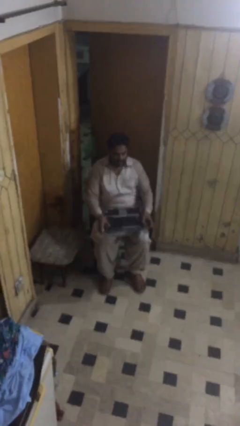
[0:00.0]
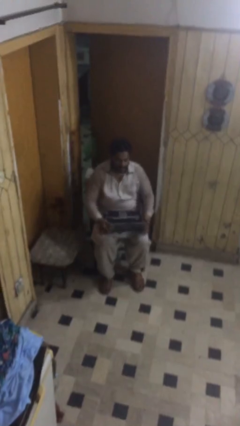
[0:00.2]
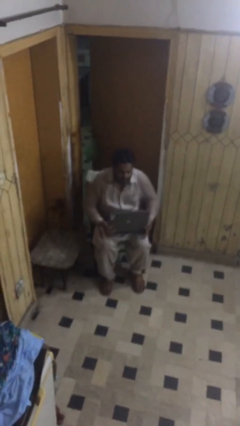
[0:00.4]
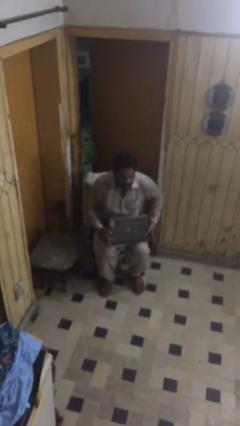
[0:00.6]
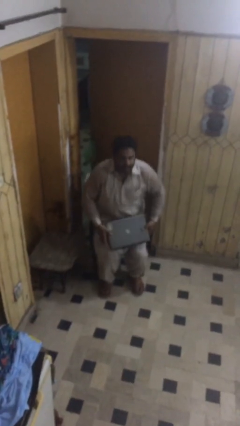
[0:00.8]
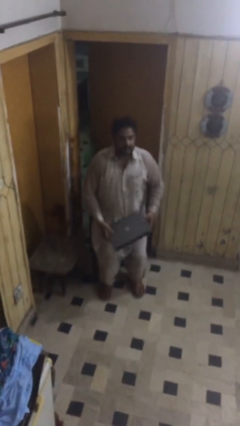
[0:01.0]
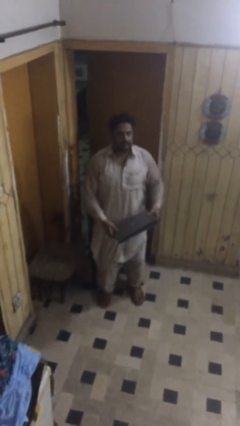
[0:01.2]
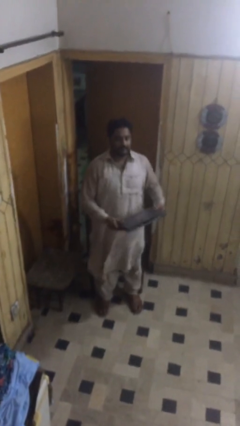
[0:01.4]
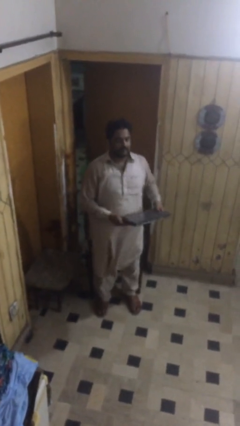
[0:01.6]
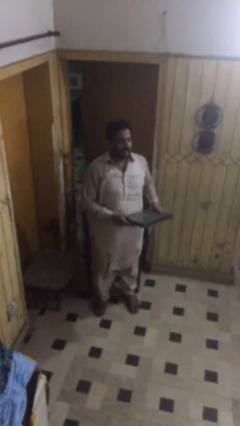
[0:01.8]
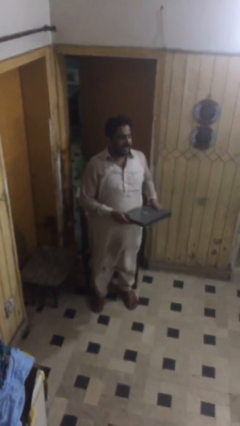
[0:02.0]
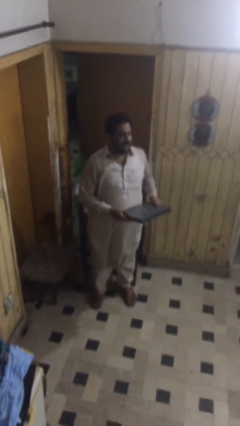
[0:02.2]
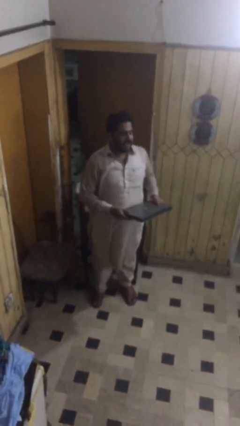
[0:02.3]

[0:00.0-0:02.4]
person stands up

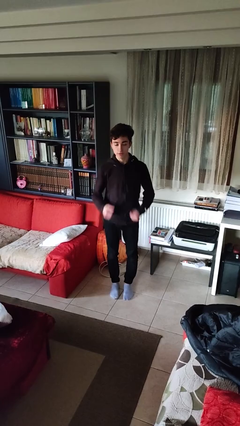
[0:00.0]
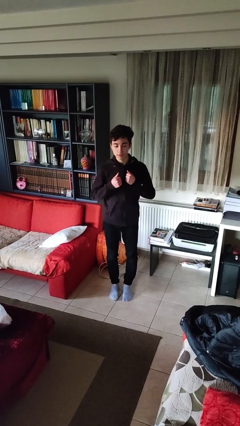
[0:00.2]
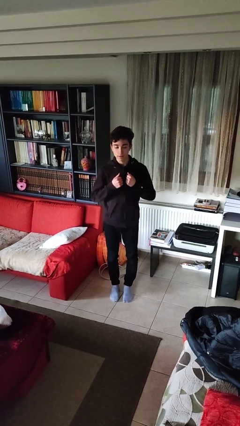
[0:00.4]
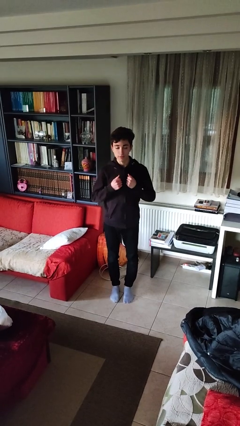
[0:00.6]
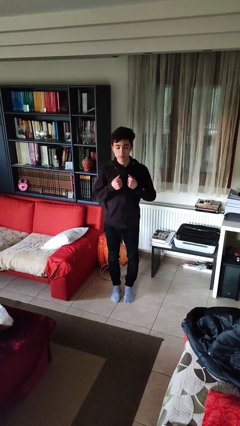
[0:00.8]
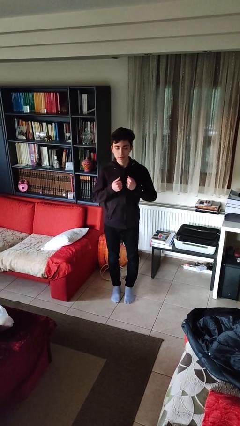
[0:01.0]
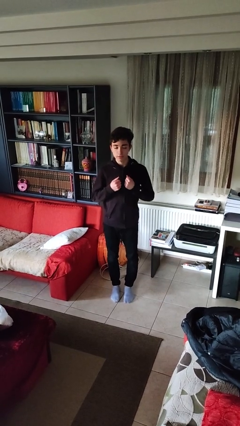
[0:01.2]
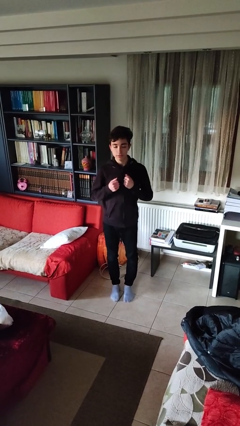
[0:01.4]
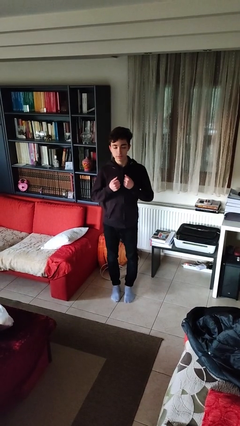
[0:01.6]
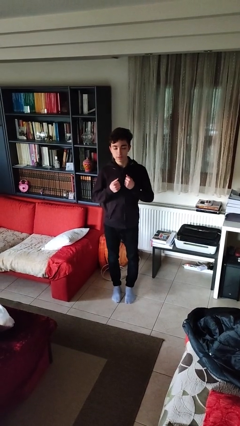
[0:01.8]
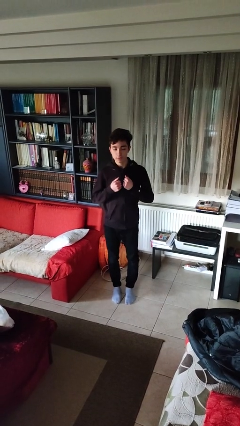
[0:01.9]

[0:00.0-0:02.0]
person drums on chest

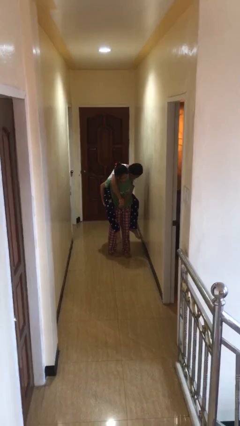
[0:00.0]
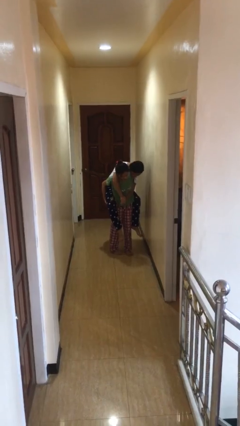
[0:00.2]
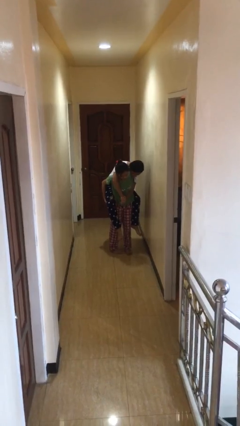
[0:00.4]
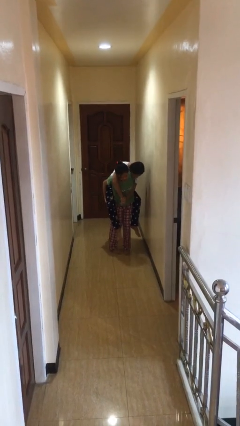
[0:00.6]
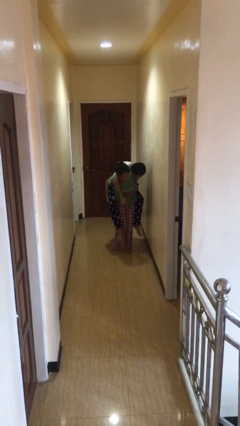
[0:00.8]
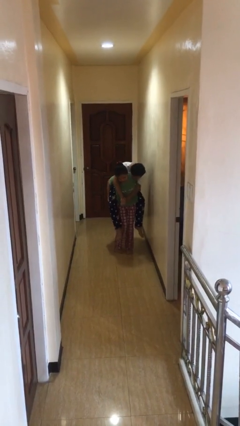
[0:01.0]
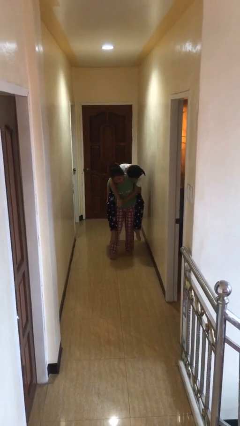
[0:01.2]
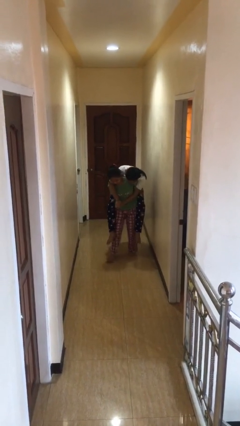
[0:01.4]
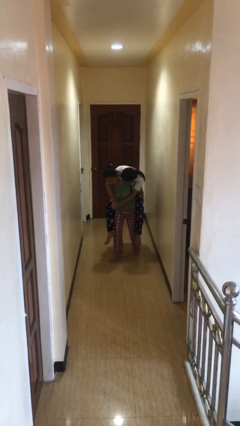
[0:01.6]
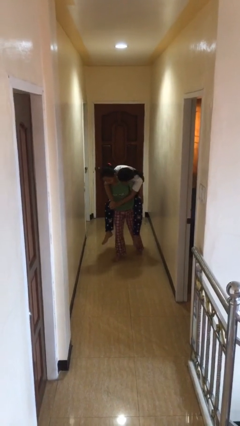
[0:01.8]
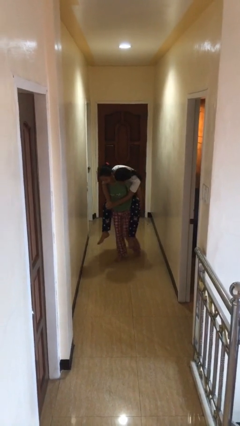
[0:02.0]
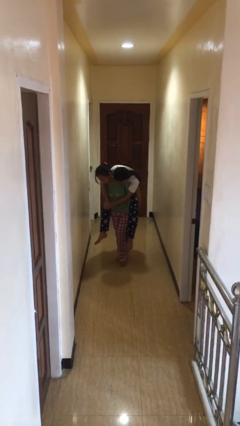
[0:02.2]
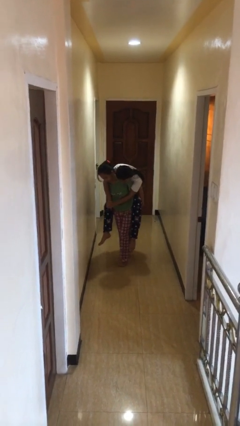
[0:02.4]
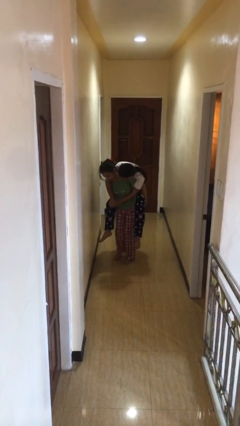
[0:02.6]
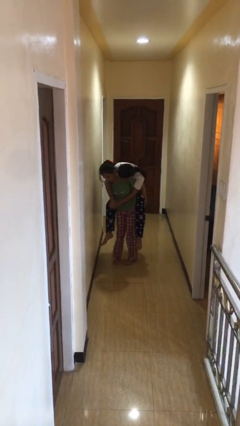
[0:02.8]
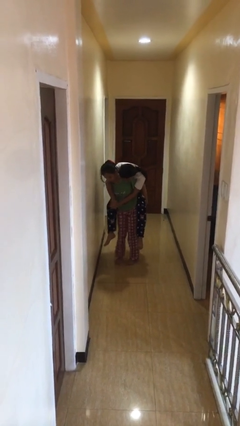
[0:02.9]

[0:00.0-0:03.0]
person carries person on back

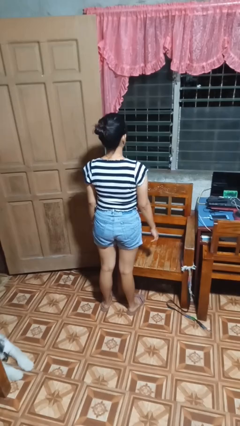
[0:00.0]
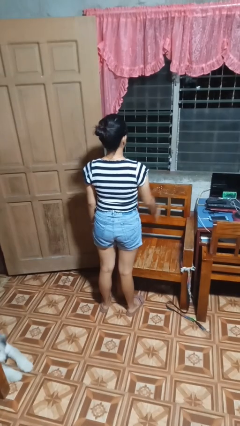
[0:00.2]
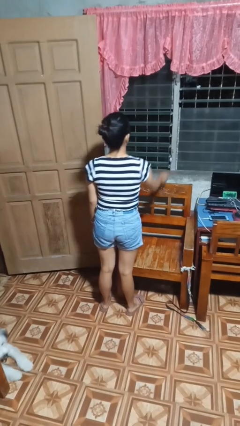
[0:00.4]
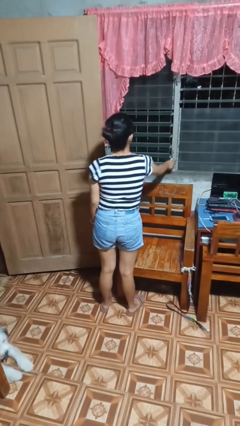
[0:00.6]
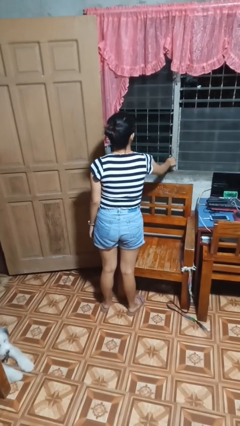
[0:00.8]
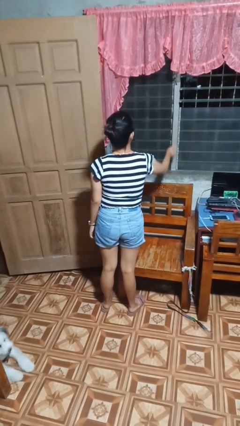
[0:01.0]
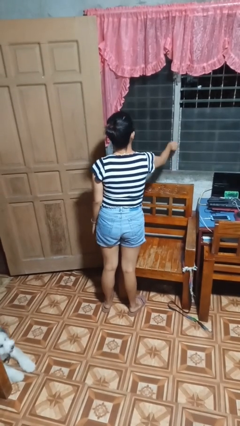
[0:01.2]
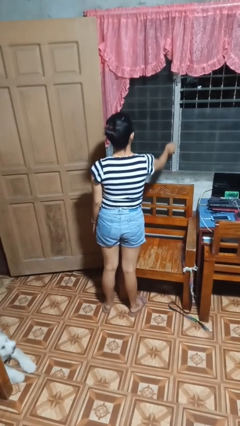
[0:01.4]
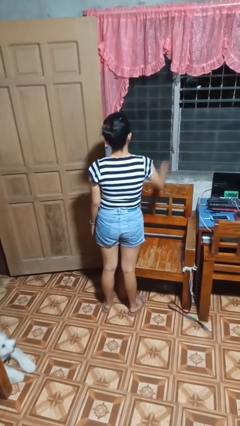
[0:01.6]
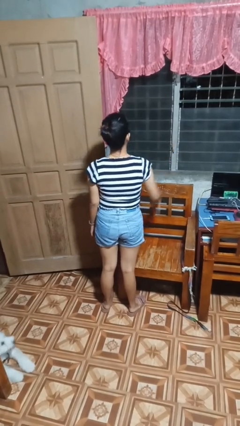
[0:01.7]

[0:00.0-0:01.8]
person closes home window

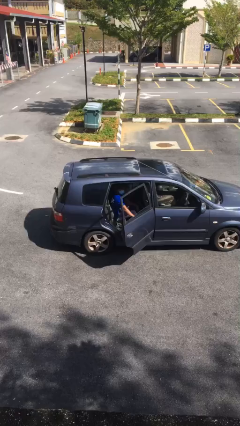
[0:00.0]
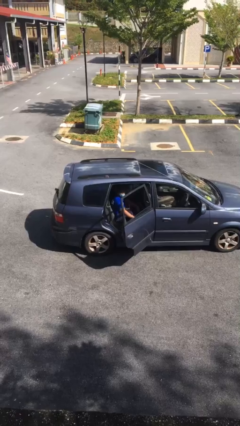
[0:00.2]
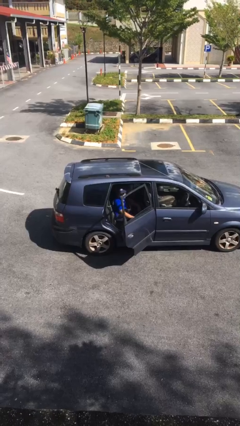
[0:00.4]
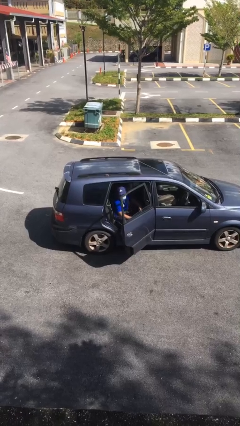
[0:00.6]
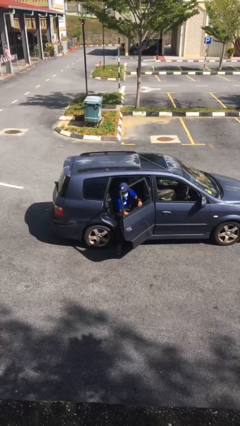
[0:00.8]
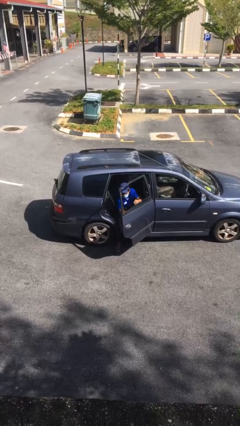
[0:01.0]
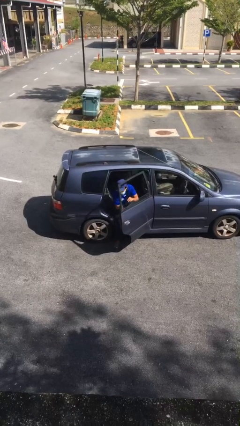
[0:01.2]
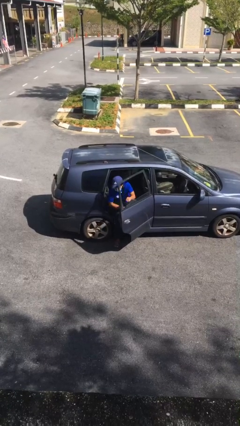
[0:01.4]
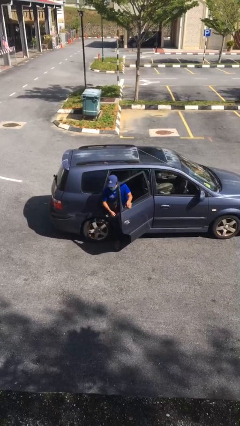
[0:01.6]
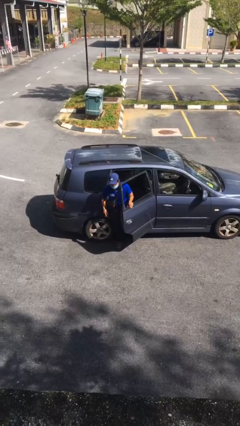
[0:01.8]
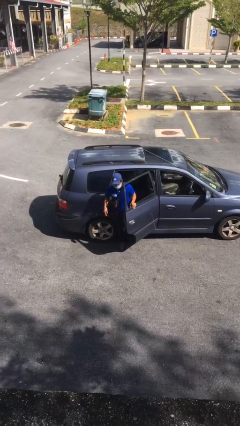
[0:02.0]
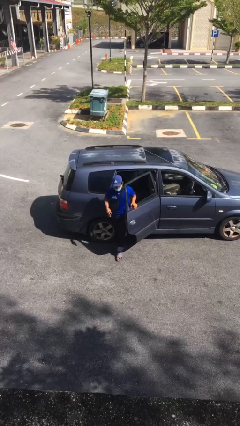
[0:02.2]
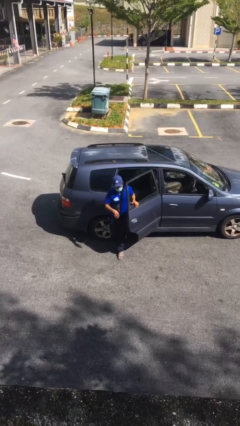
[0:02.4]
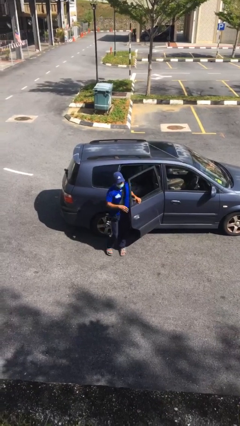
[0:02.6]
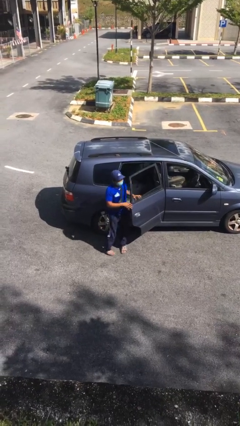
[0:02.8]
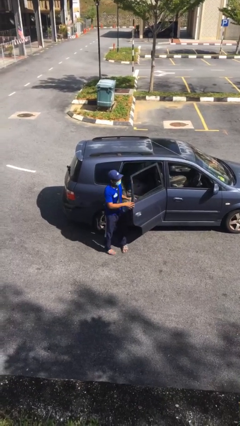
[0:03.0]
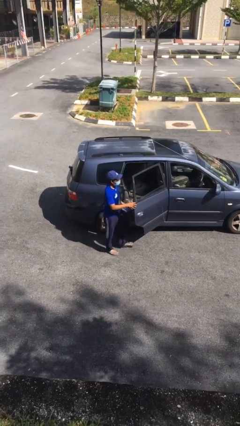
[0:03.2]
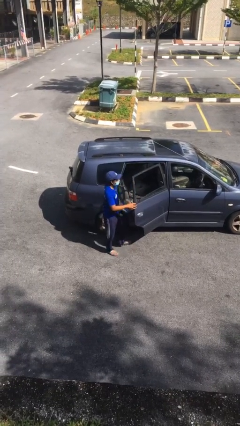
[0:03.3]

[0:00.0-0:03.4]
person exits car

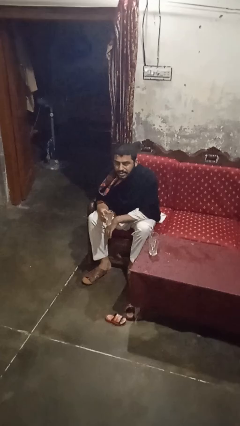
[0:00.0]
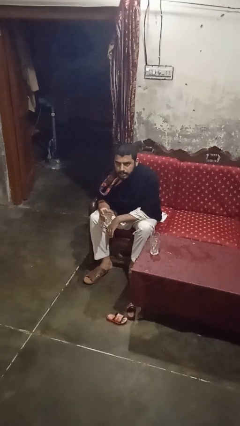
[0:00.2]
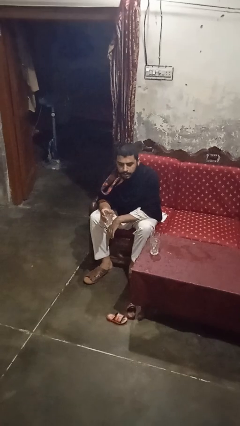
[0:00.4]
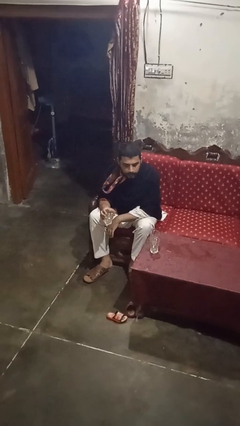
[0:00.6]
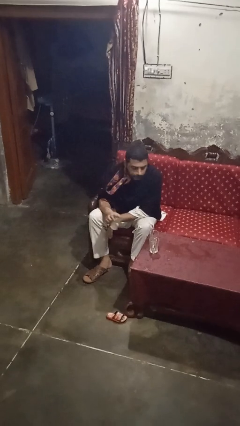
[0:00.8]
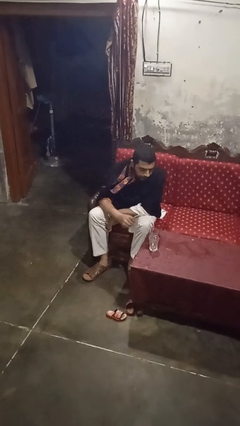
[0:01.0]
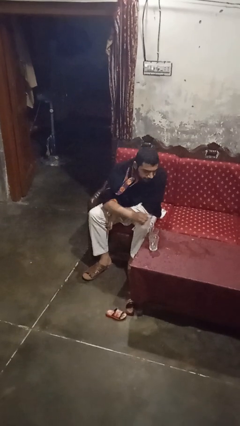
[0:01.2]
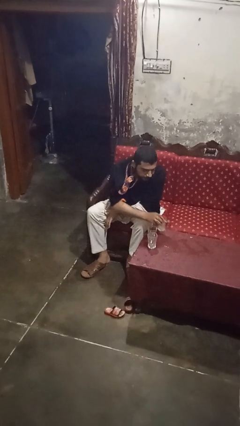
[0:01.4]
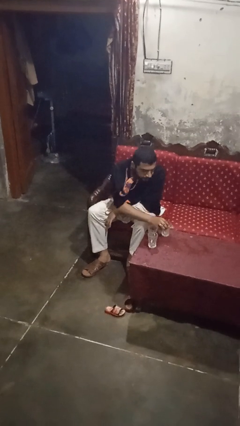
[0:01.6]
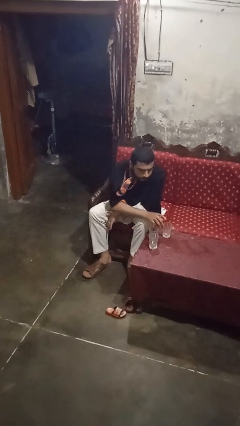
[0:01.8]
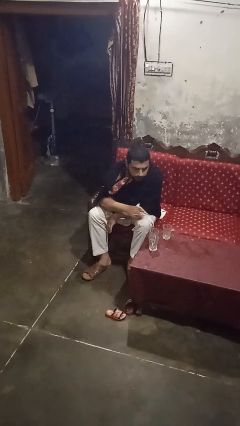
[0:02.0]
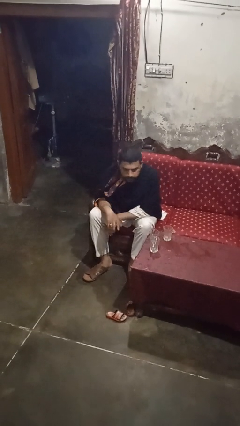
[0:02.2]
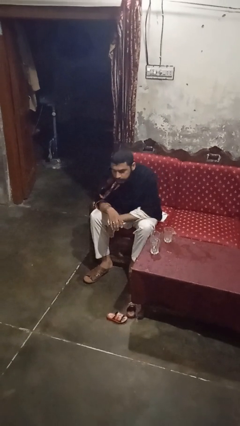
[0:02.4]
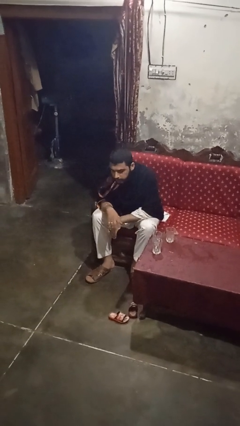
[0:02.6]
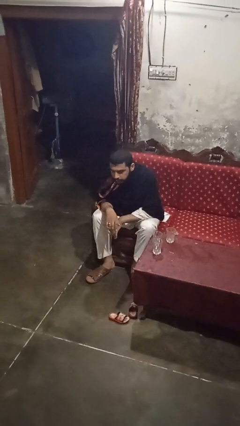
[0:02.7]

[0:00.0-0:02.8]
person puts down object on table

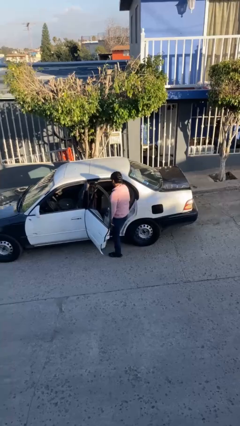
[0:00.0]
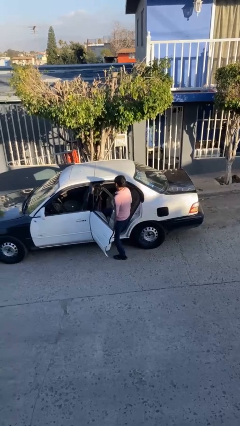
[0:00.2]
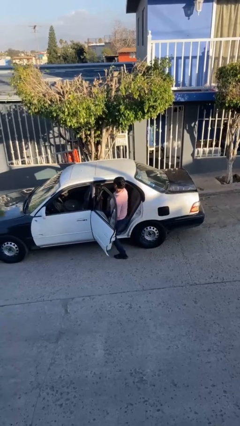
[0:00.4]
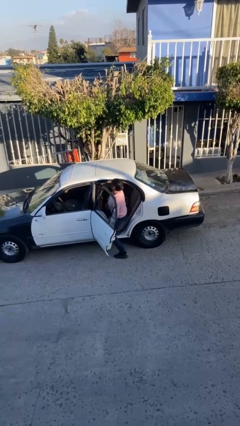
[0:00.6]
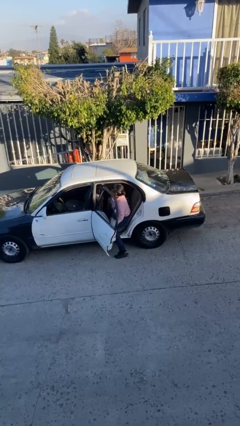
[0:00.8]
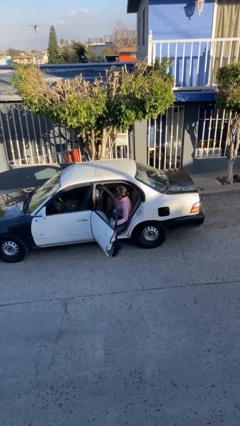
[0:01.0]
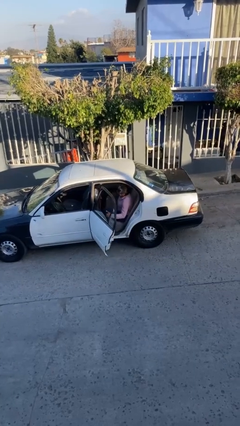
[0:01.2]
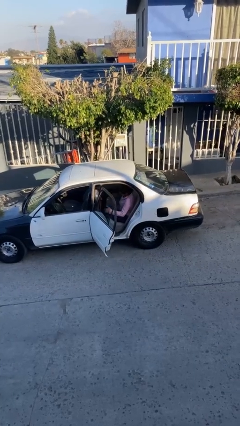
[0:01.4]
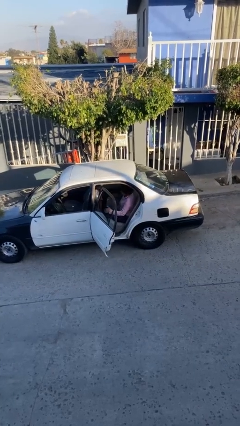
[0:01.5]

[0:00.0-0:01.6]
person enters car

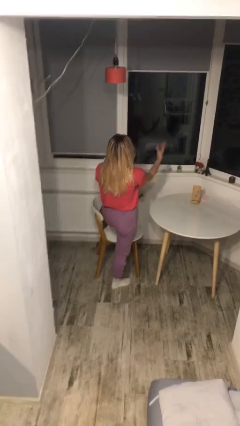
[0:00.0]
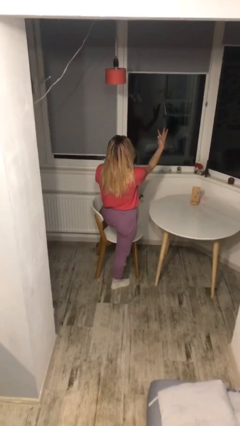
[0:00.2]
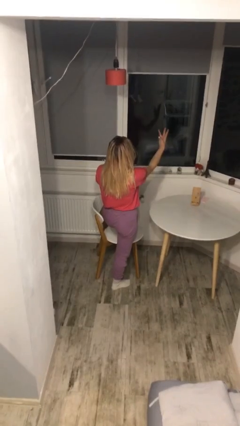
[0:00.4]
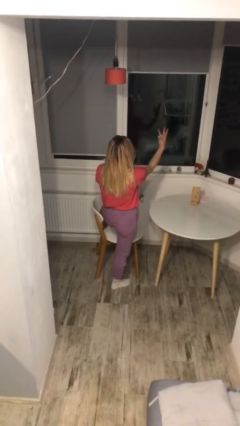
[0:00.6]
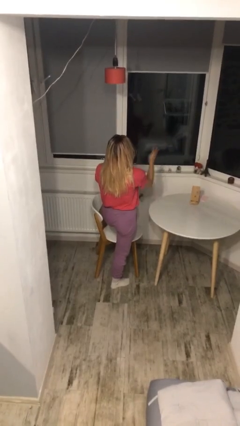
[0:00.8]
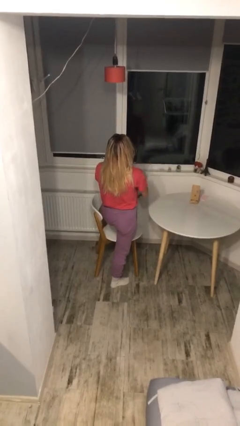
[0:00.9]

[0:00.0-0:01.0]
person gestures number three
